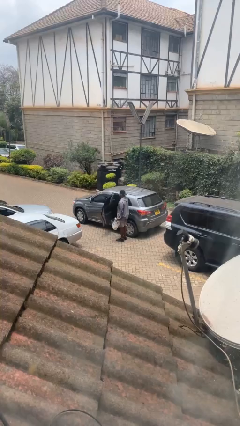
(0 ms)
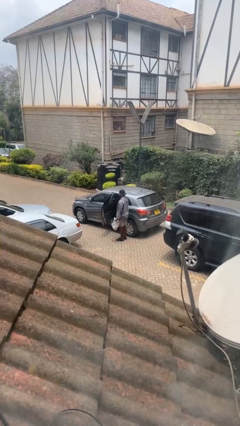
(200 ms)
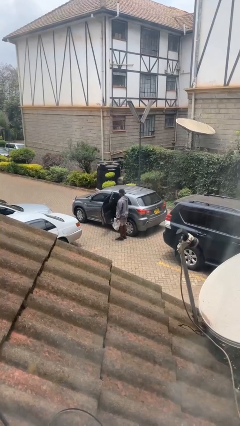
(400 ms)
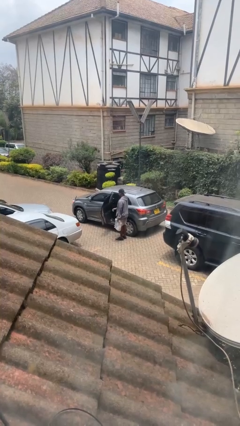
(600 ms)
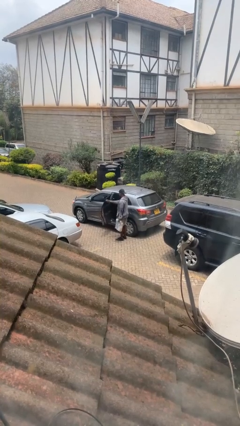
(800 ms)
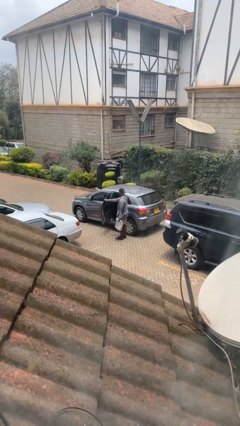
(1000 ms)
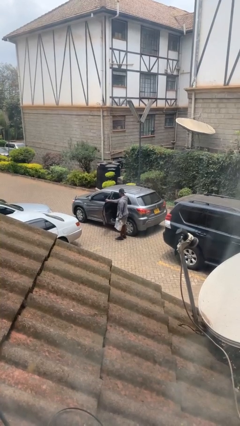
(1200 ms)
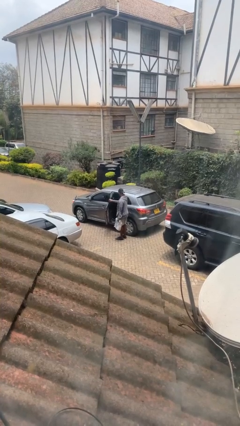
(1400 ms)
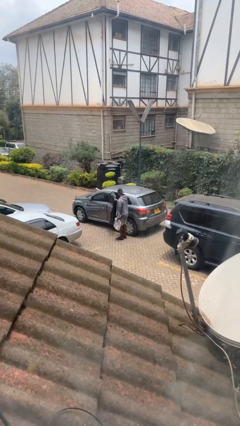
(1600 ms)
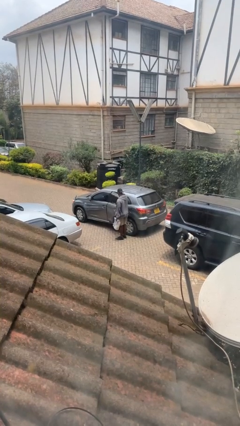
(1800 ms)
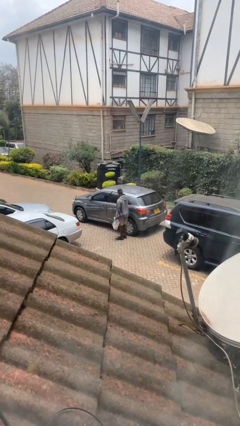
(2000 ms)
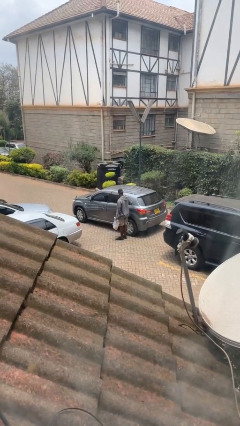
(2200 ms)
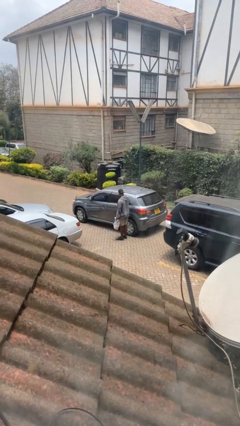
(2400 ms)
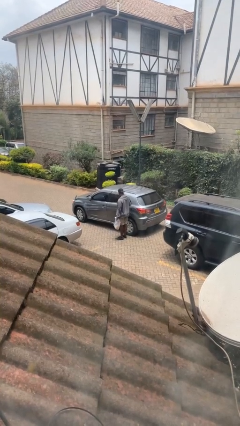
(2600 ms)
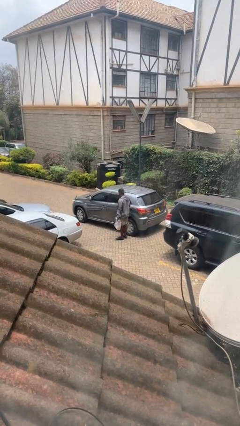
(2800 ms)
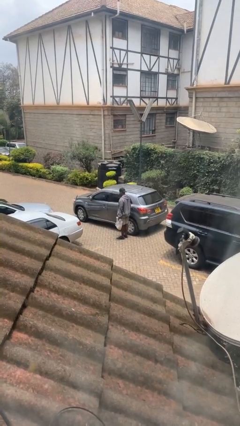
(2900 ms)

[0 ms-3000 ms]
person closes car door

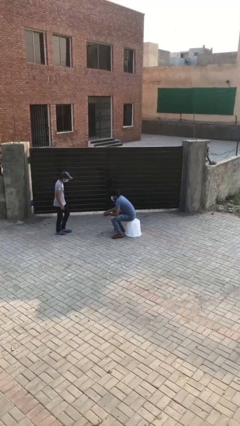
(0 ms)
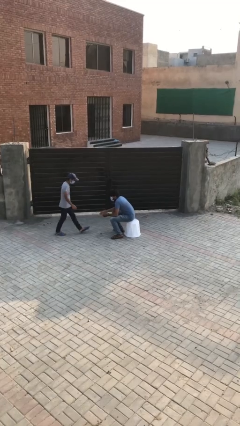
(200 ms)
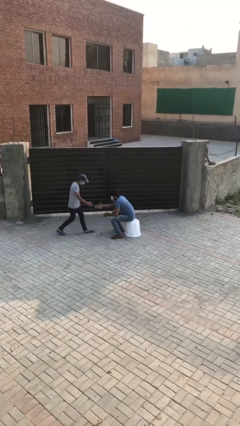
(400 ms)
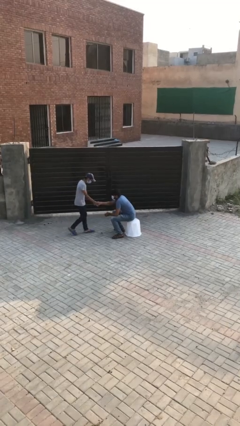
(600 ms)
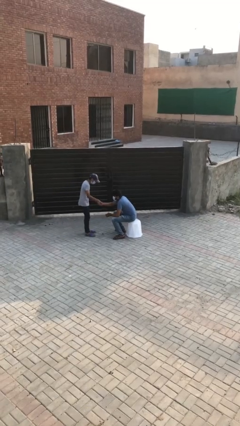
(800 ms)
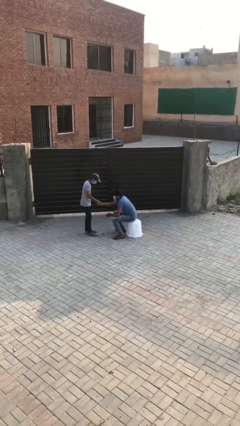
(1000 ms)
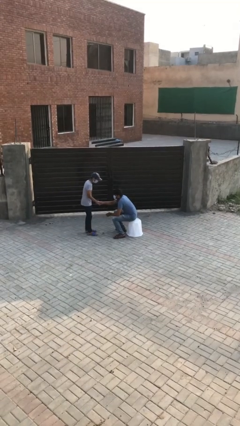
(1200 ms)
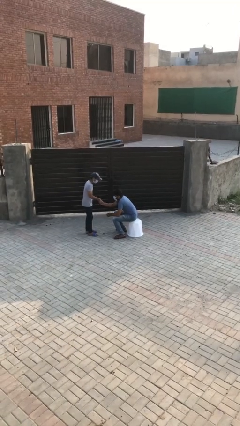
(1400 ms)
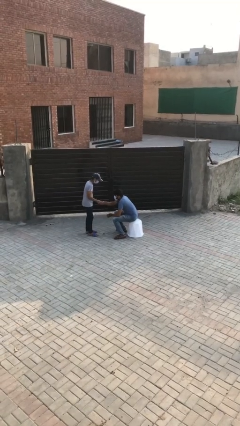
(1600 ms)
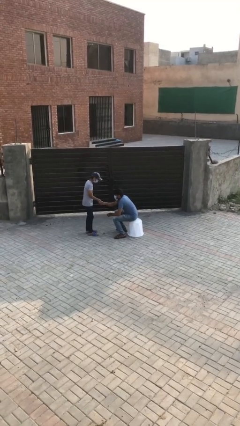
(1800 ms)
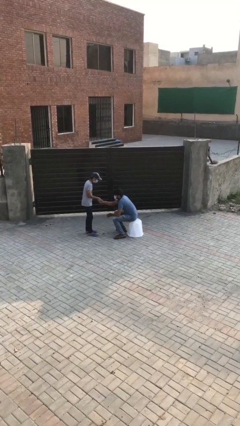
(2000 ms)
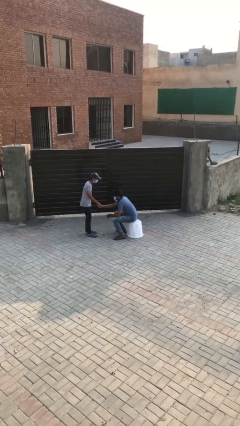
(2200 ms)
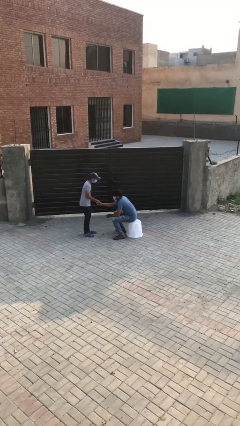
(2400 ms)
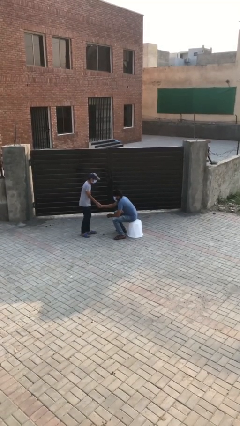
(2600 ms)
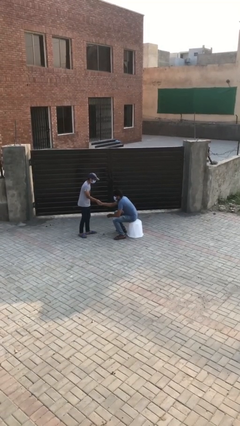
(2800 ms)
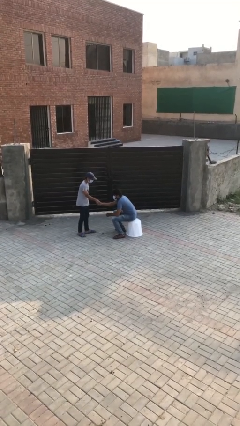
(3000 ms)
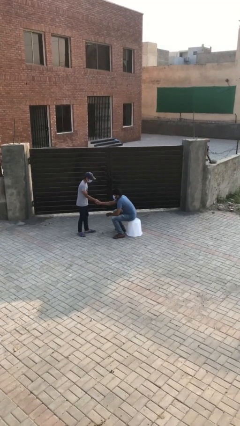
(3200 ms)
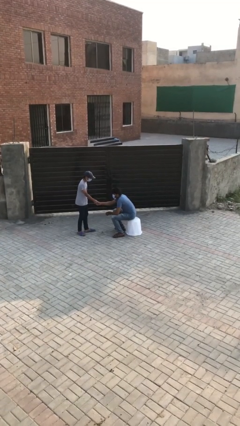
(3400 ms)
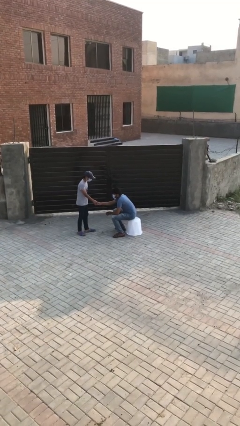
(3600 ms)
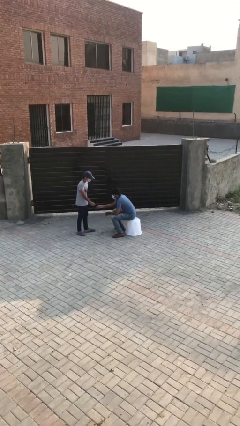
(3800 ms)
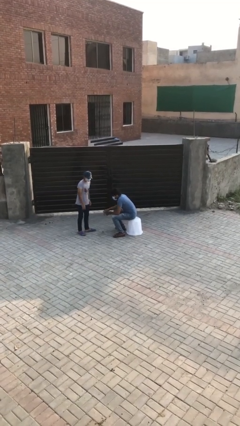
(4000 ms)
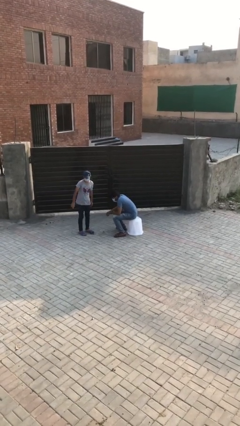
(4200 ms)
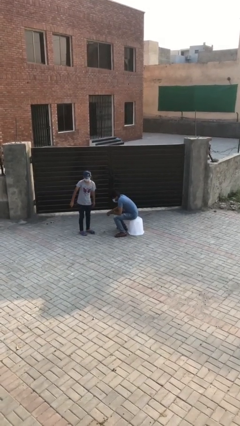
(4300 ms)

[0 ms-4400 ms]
person shakes hand

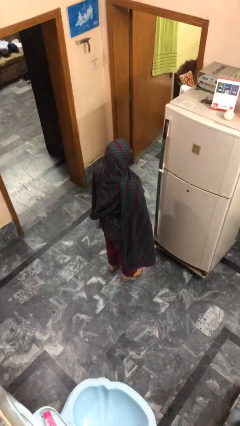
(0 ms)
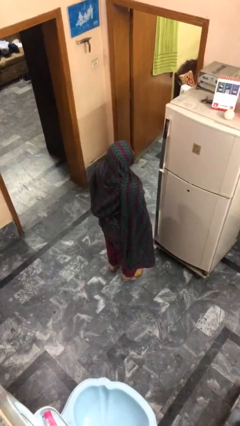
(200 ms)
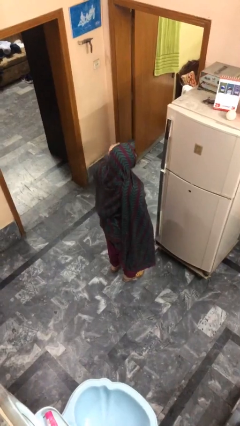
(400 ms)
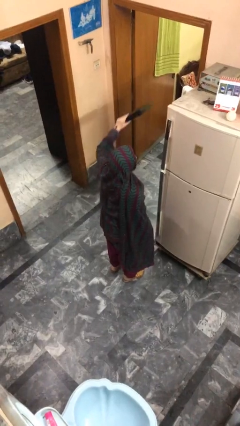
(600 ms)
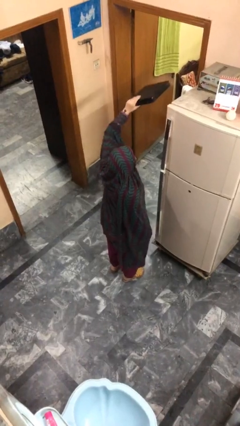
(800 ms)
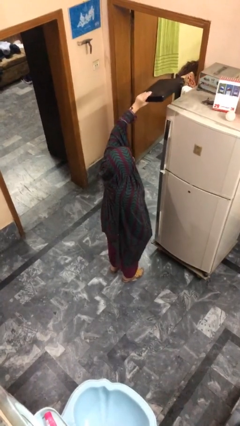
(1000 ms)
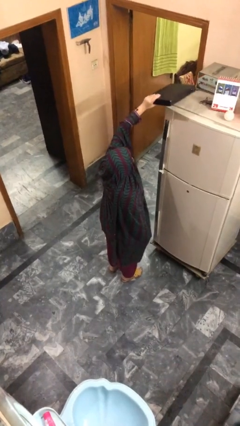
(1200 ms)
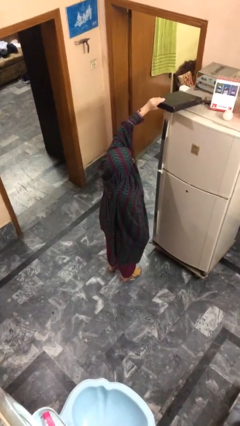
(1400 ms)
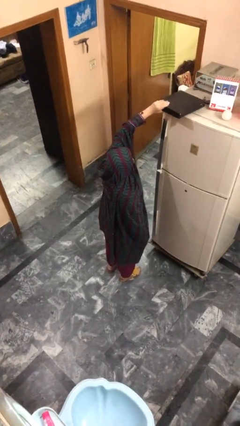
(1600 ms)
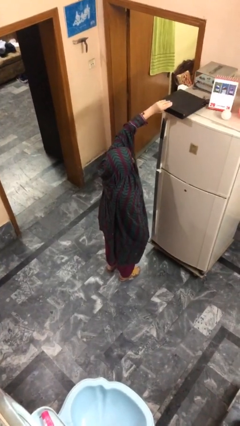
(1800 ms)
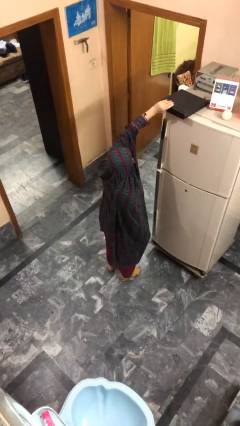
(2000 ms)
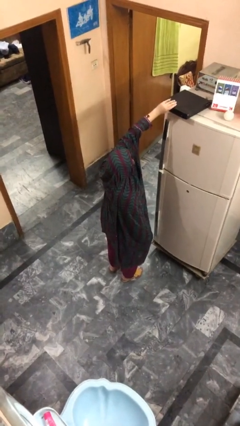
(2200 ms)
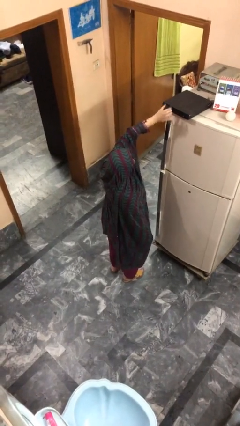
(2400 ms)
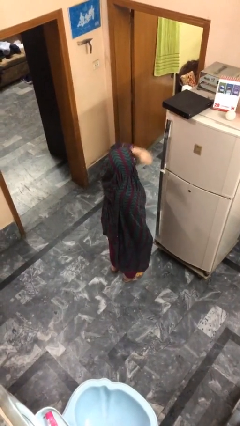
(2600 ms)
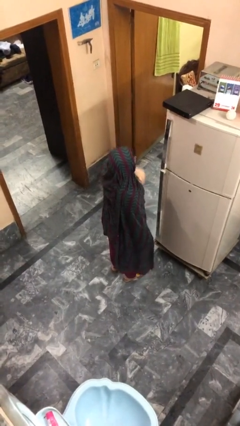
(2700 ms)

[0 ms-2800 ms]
person puts down object on shelf

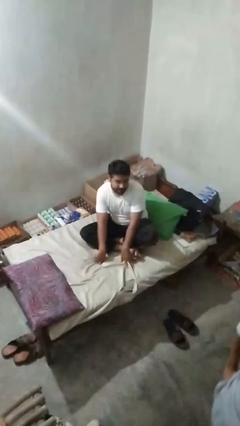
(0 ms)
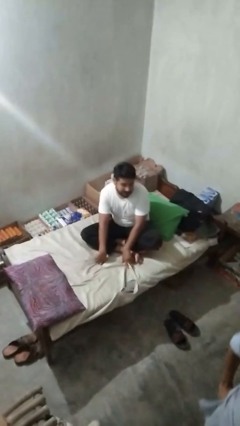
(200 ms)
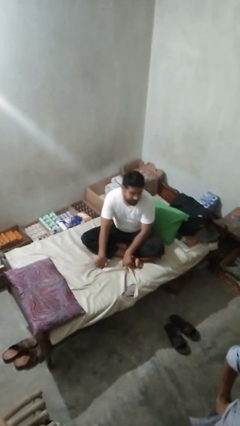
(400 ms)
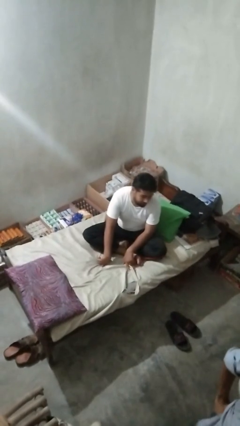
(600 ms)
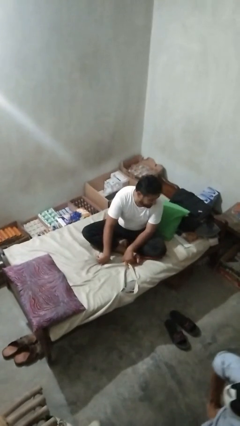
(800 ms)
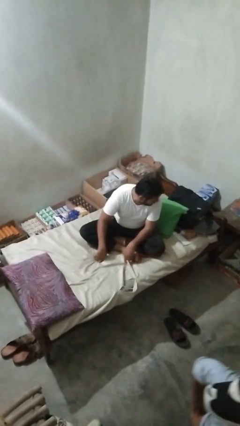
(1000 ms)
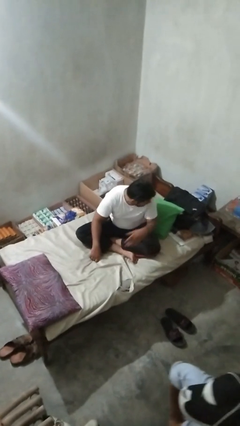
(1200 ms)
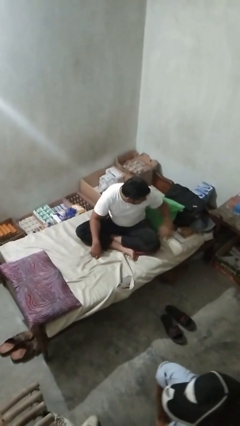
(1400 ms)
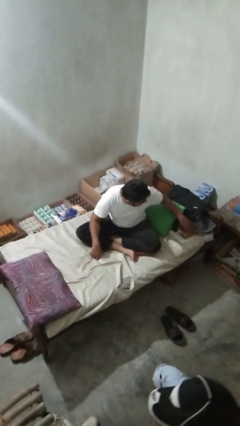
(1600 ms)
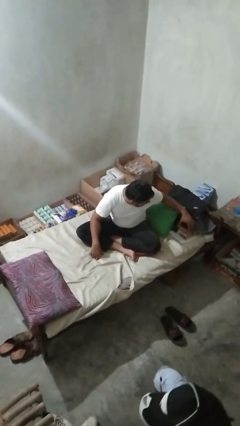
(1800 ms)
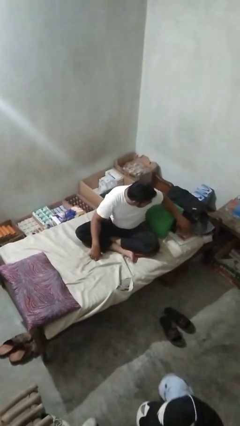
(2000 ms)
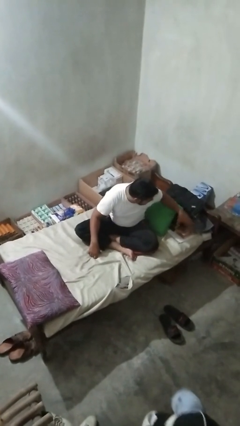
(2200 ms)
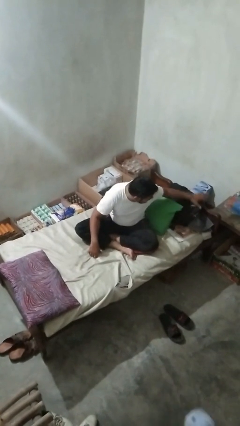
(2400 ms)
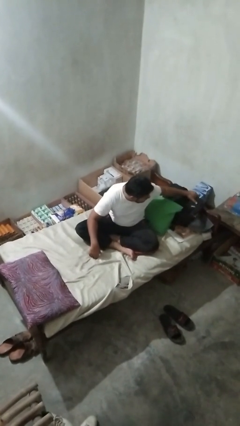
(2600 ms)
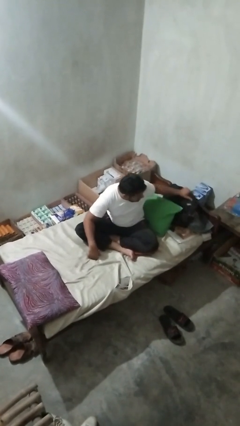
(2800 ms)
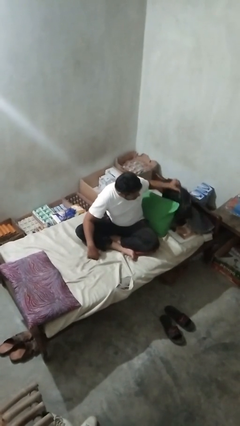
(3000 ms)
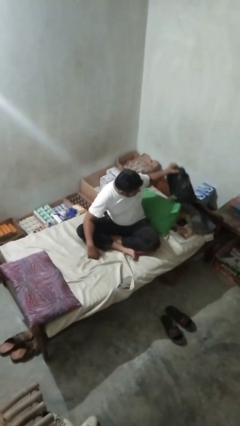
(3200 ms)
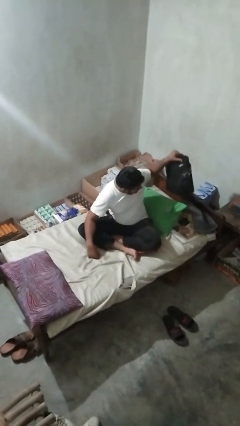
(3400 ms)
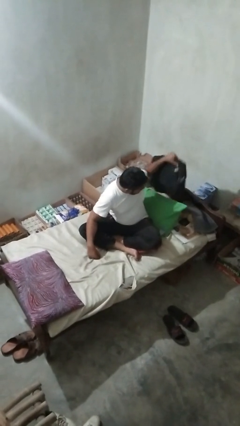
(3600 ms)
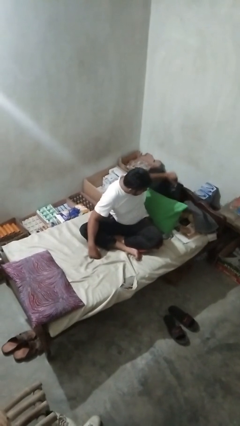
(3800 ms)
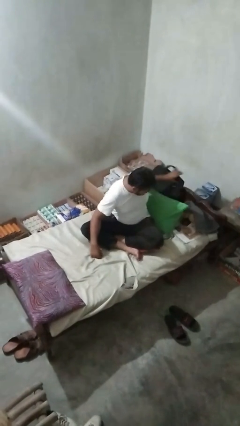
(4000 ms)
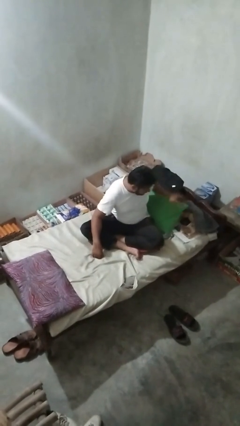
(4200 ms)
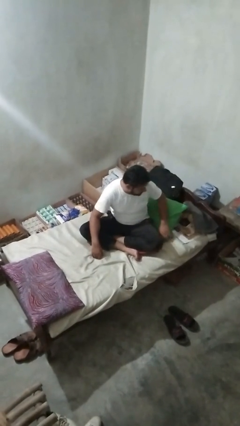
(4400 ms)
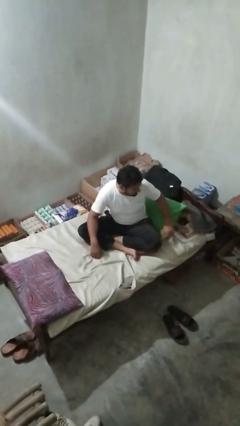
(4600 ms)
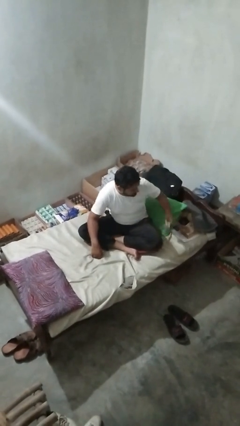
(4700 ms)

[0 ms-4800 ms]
person searches under bed

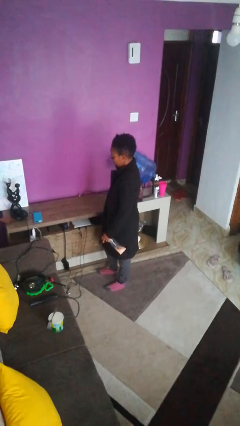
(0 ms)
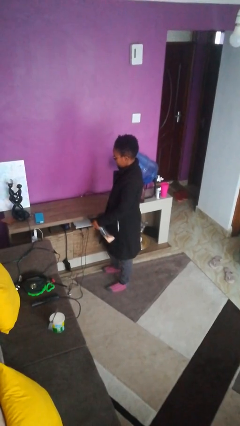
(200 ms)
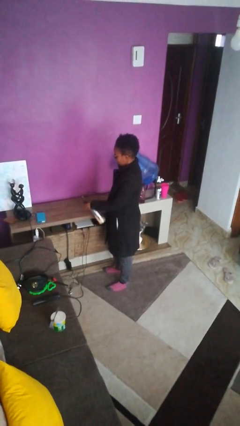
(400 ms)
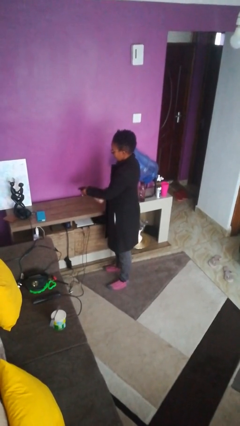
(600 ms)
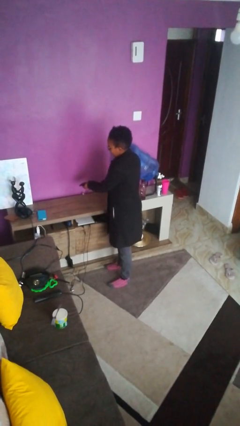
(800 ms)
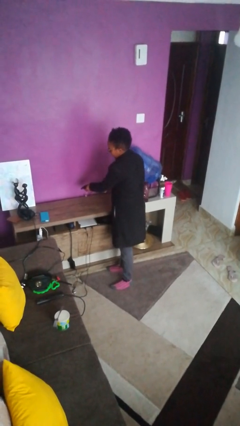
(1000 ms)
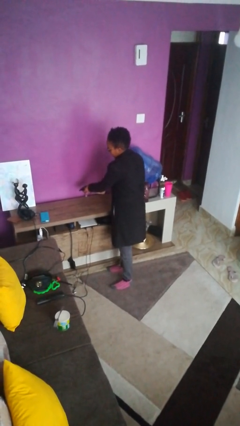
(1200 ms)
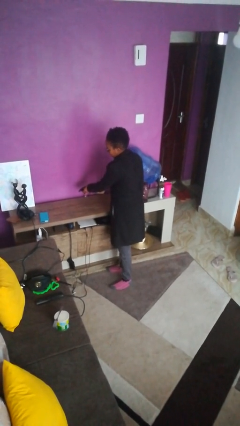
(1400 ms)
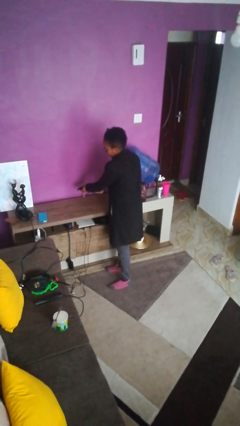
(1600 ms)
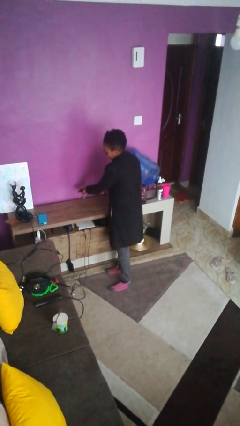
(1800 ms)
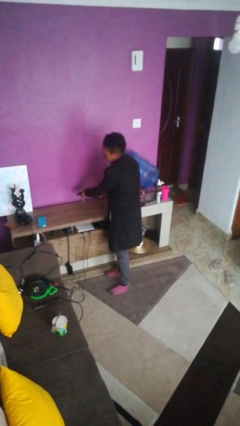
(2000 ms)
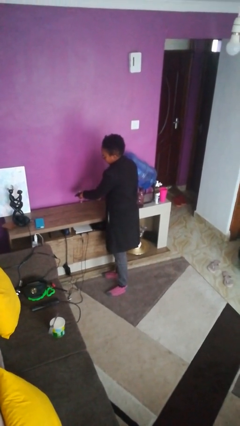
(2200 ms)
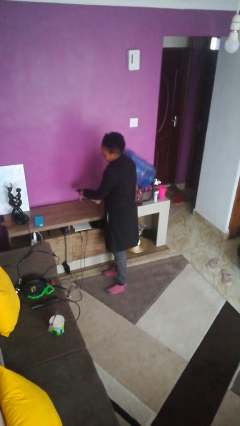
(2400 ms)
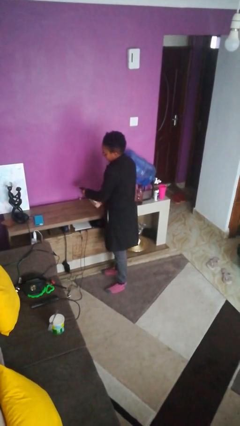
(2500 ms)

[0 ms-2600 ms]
person sprays from bottle

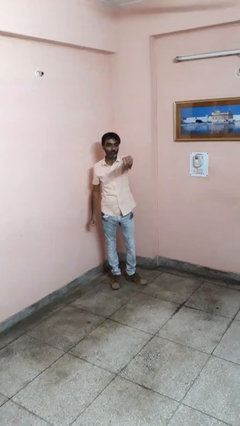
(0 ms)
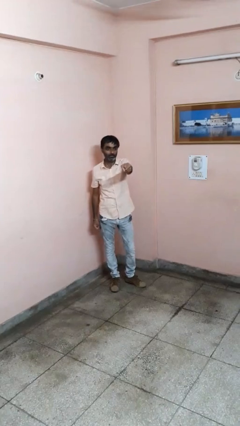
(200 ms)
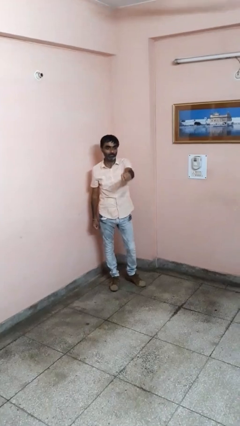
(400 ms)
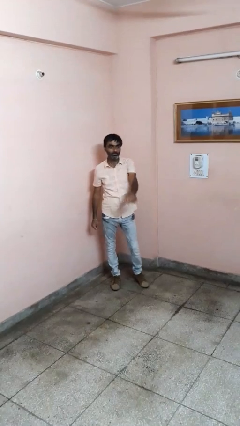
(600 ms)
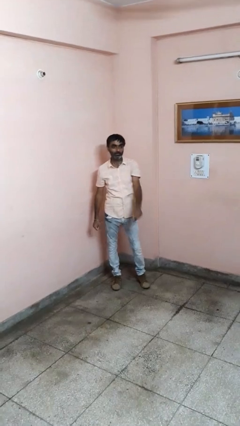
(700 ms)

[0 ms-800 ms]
person punches
